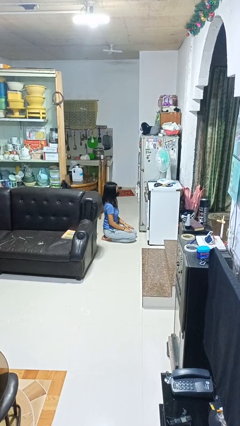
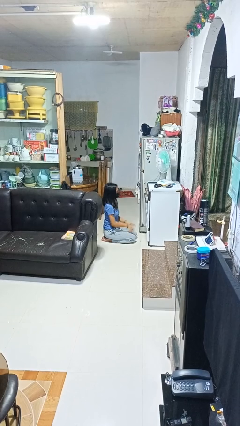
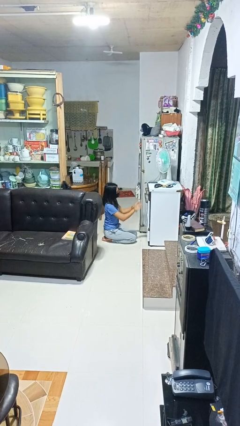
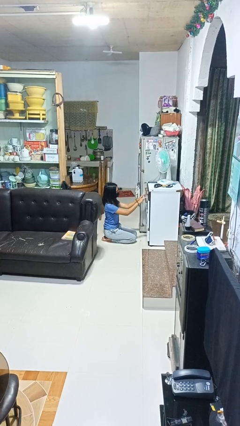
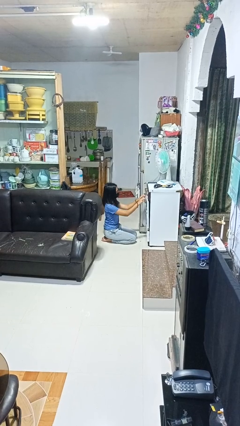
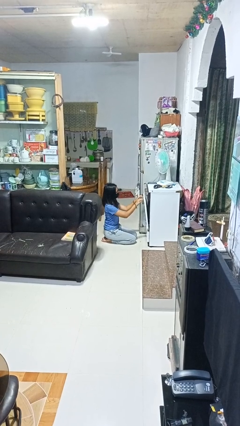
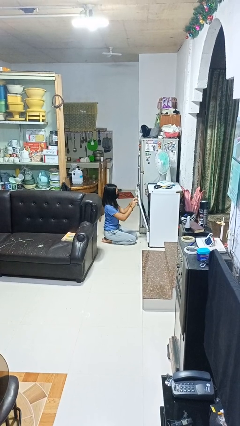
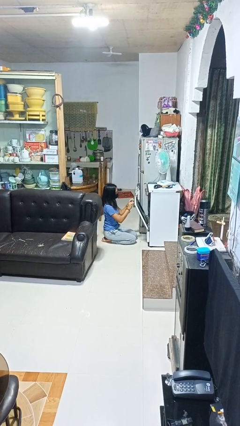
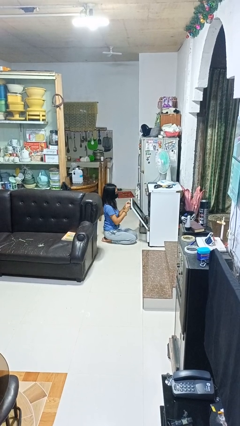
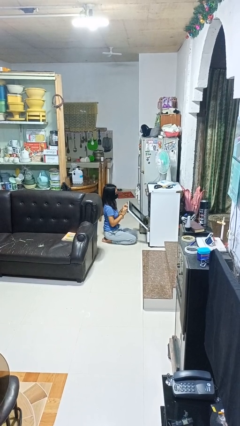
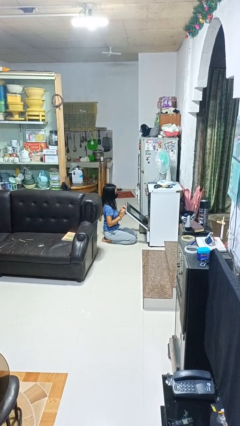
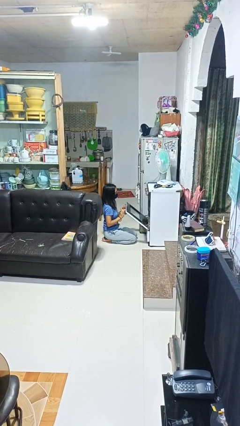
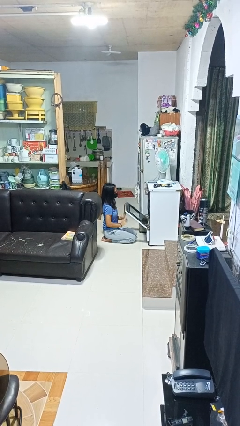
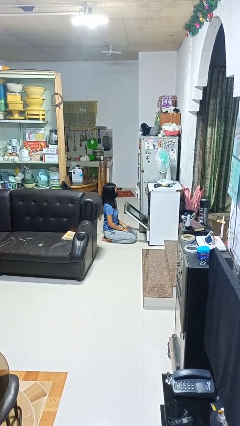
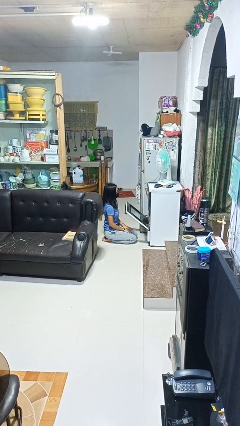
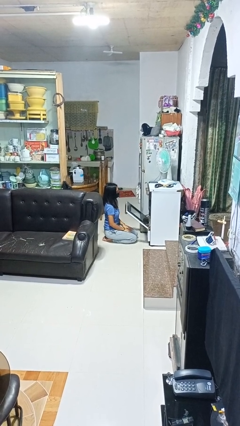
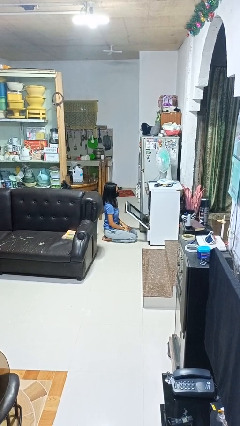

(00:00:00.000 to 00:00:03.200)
person opens oven door

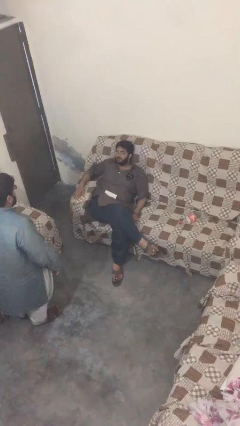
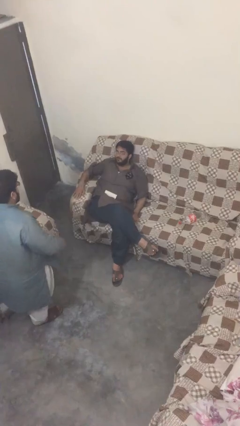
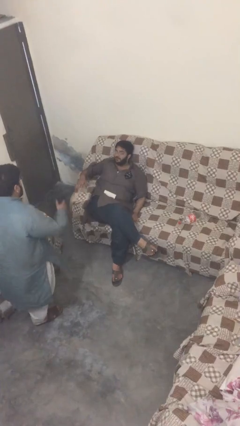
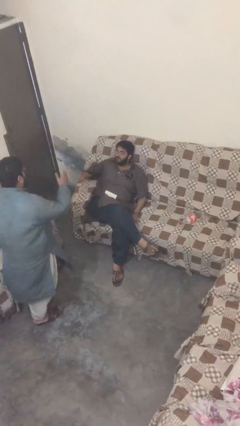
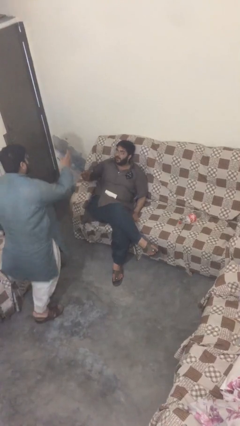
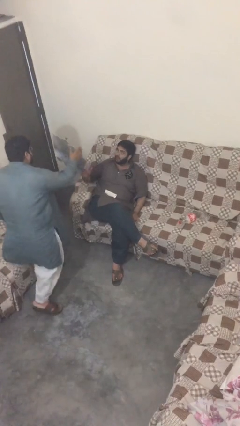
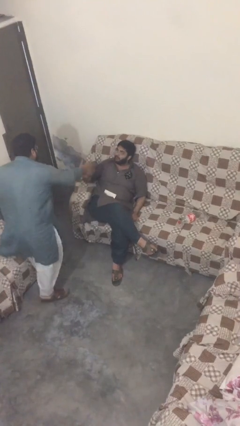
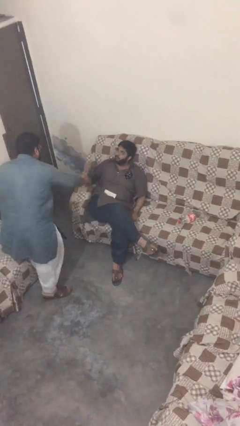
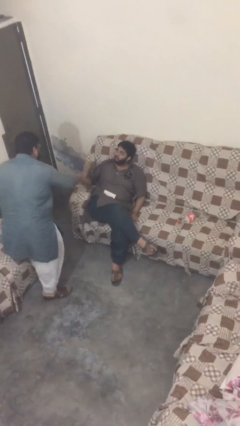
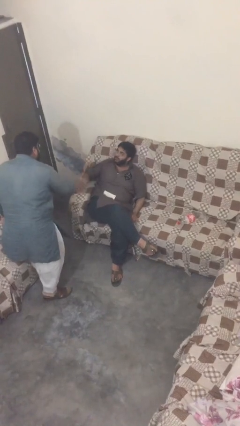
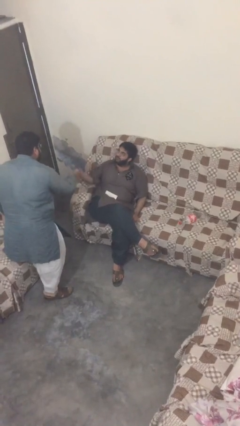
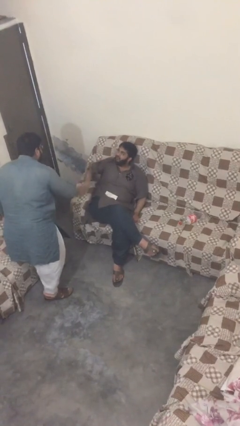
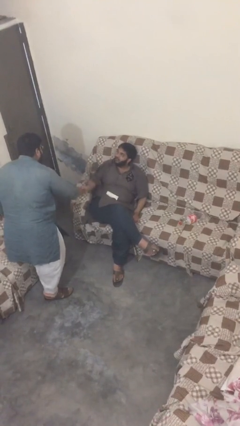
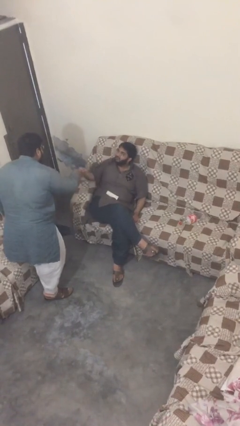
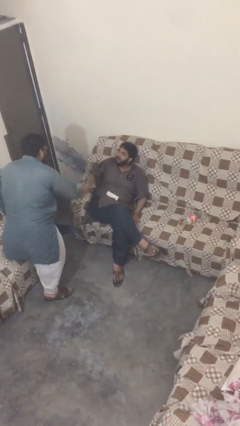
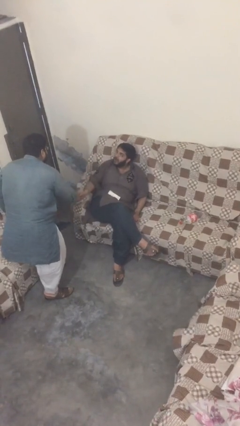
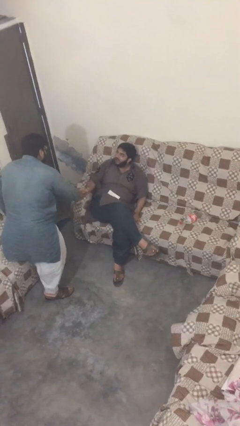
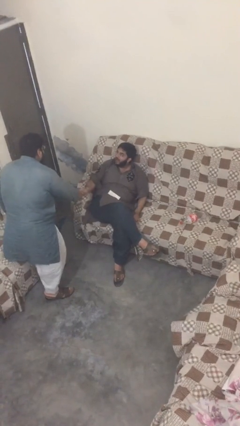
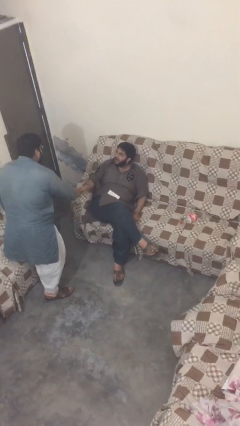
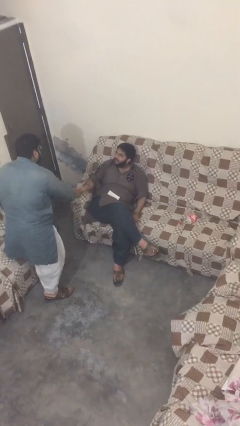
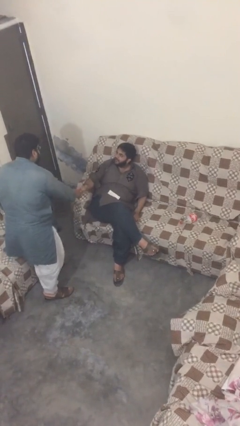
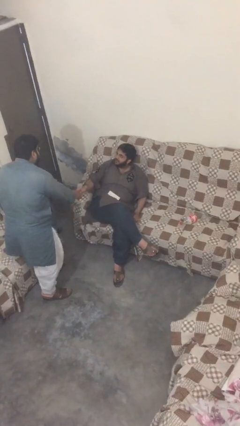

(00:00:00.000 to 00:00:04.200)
person shakes hand

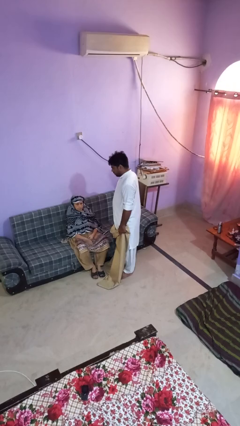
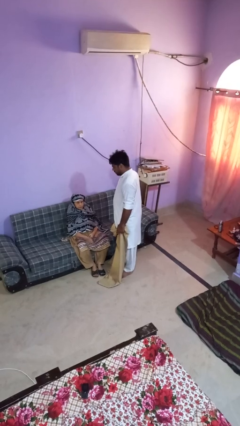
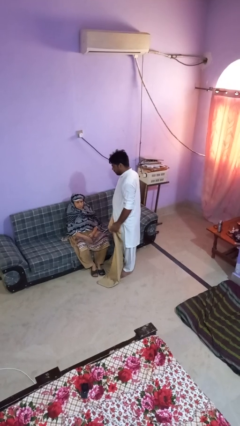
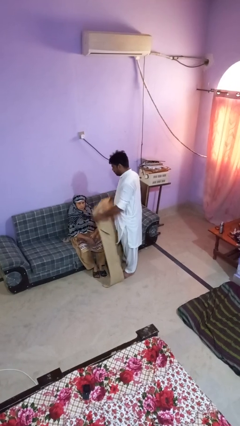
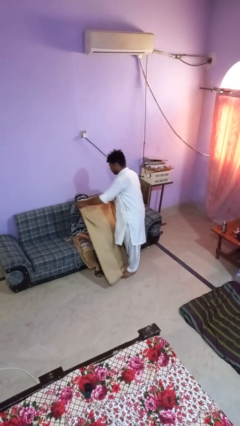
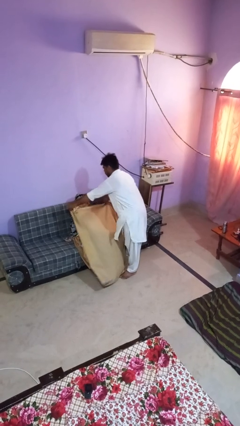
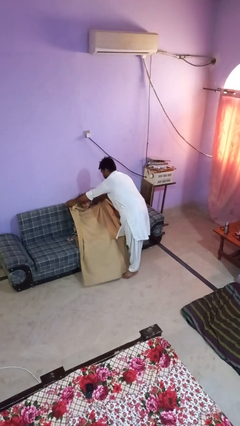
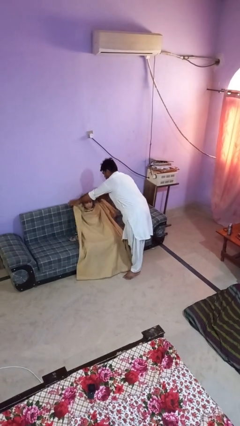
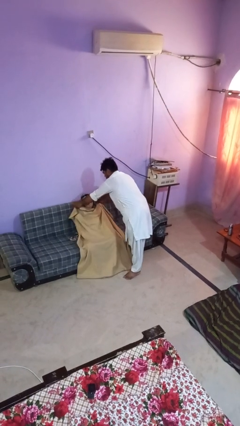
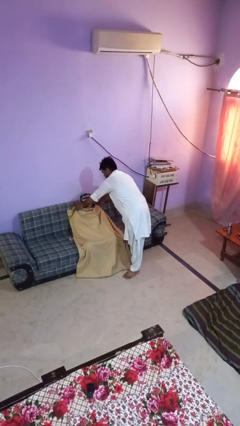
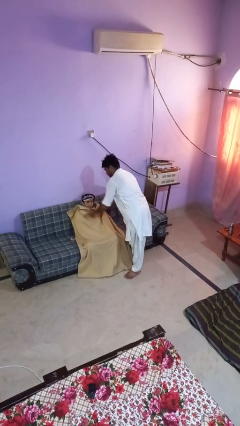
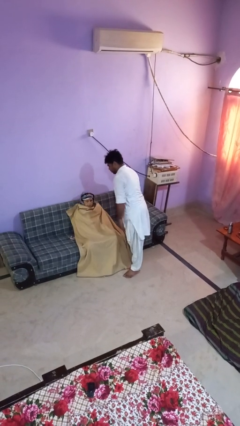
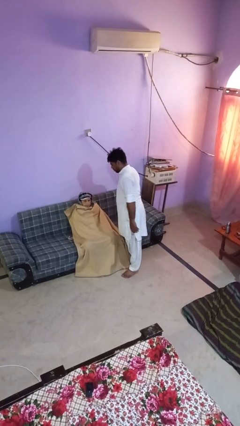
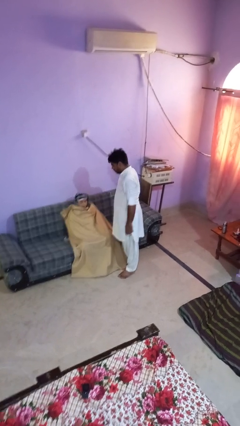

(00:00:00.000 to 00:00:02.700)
person covers friend with blanket

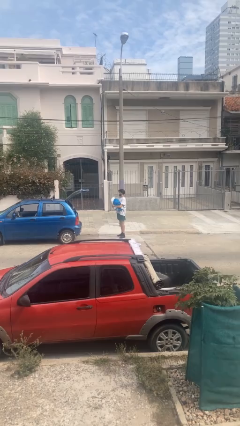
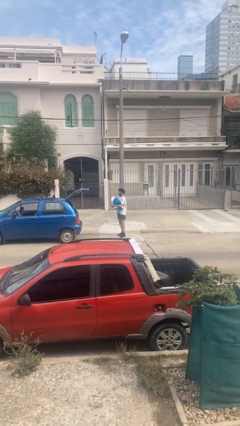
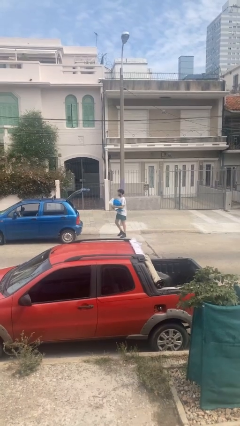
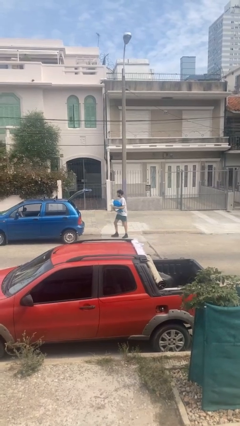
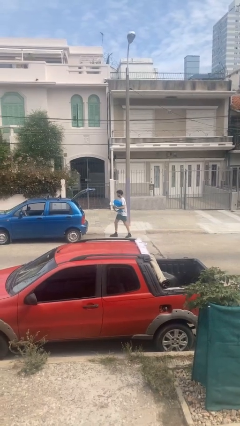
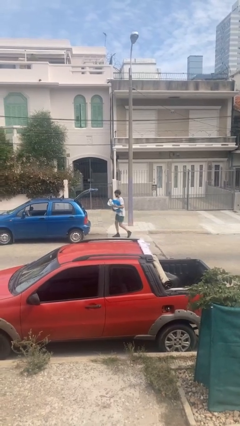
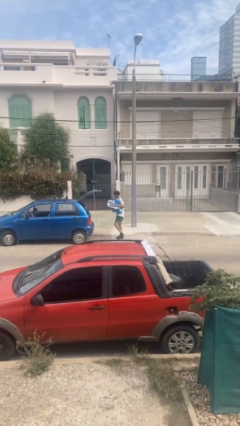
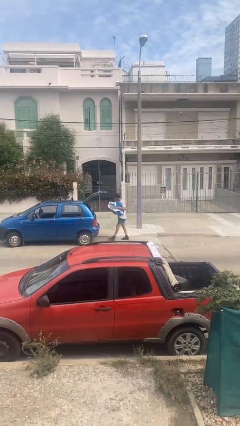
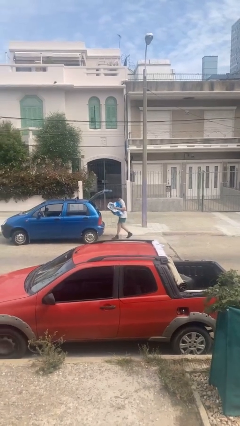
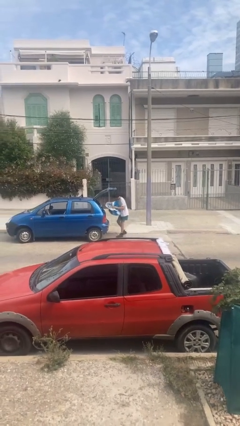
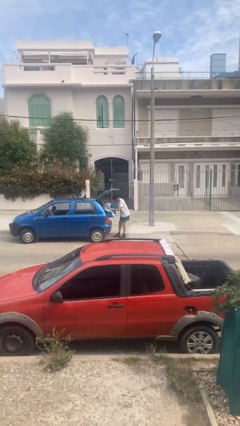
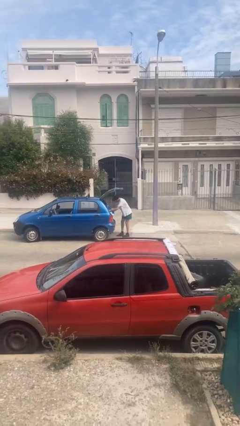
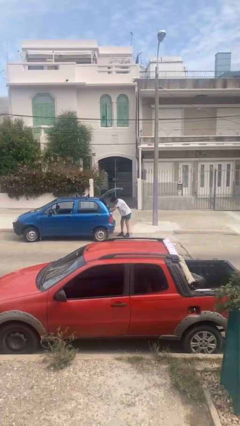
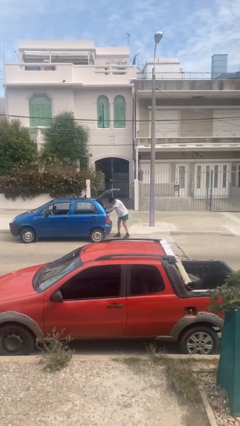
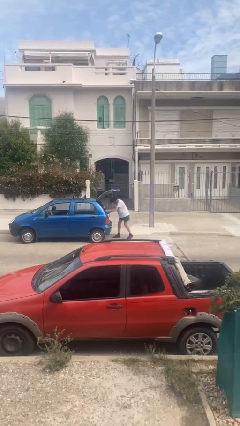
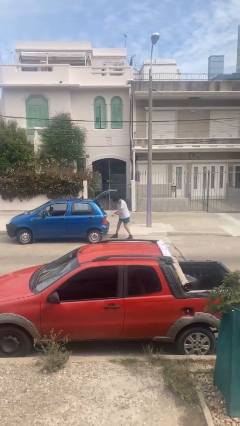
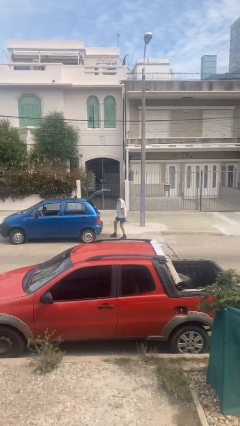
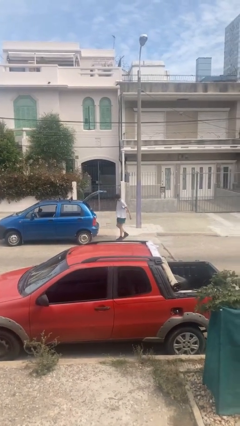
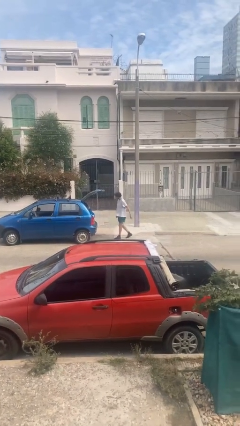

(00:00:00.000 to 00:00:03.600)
person loads car

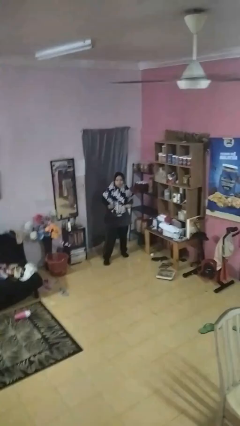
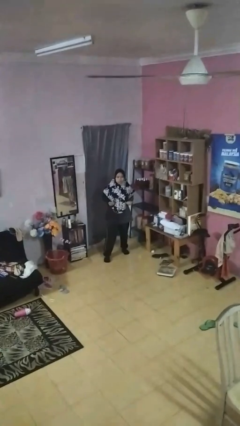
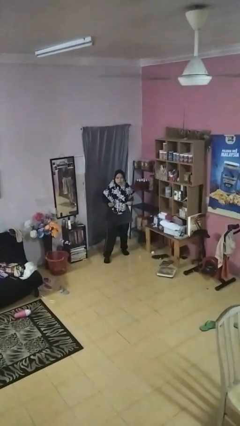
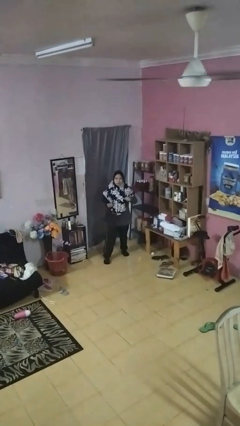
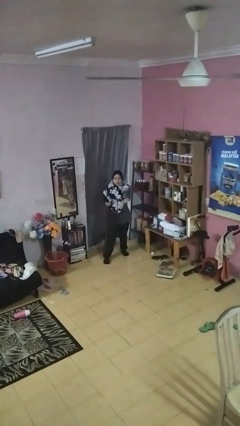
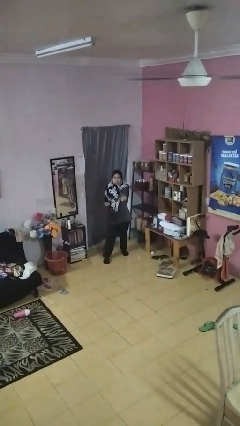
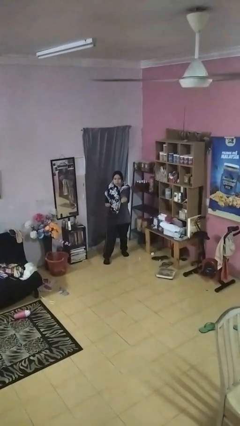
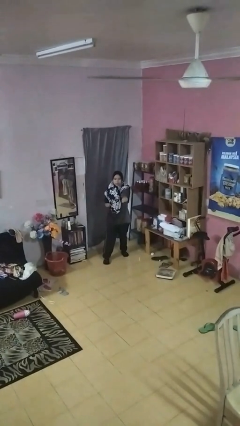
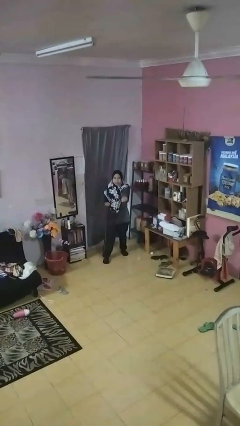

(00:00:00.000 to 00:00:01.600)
person punches

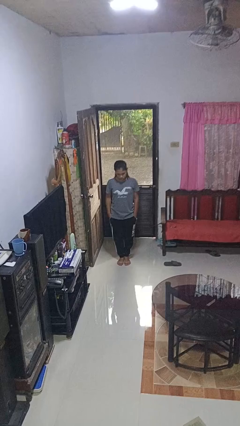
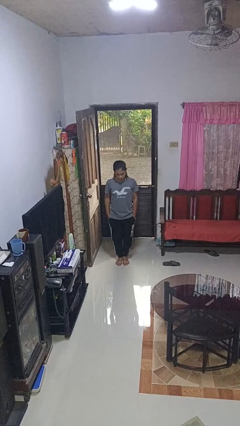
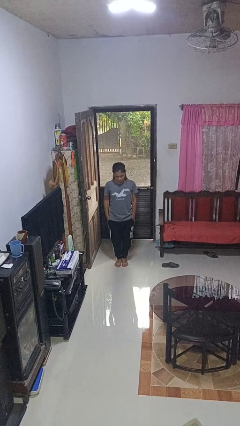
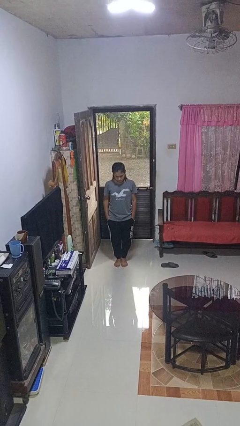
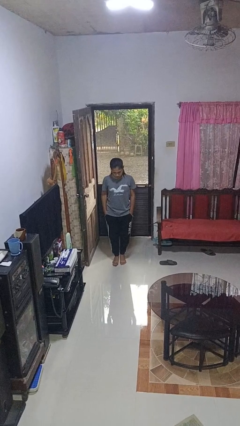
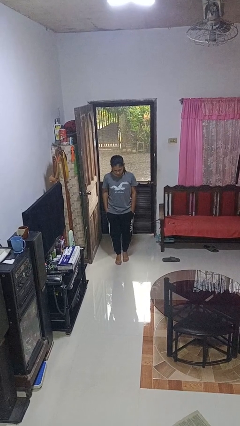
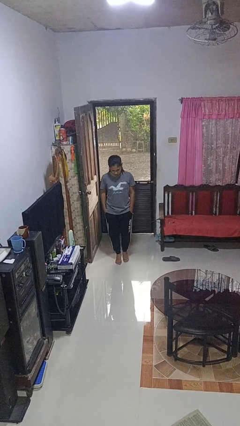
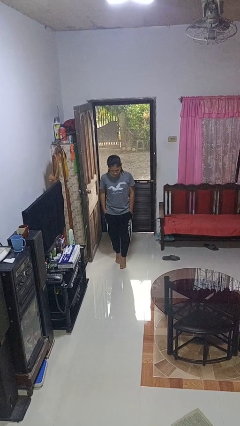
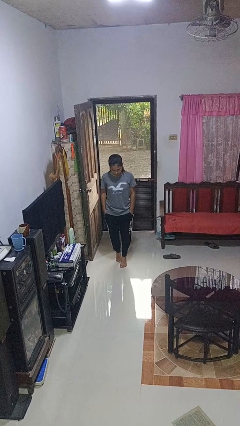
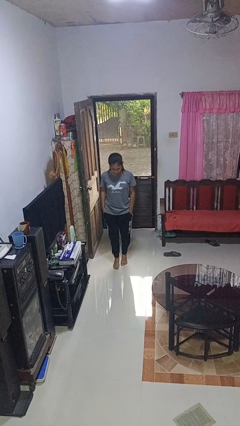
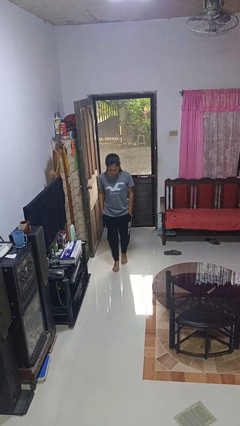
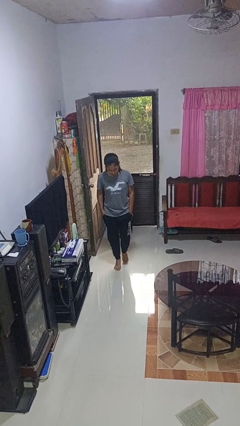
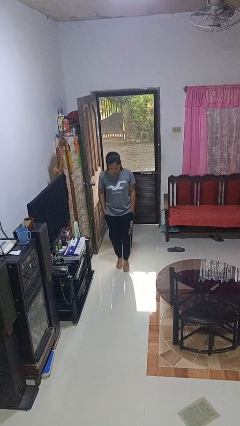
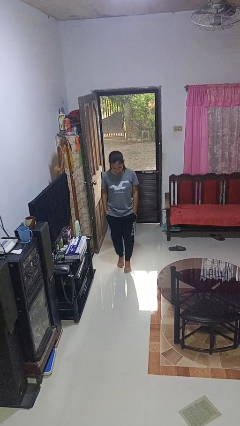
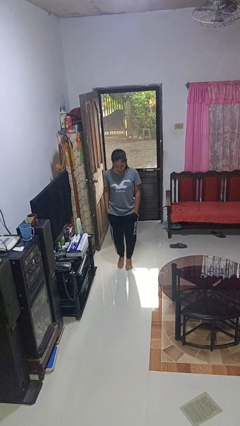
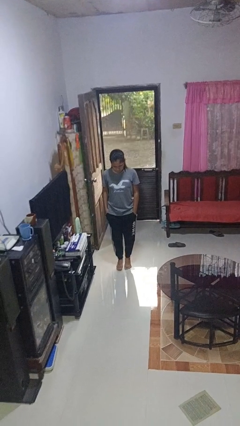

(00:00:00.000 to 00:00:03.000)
person walks tiptoe
